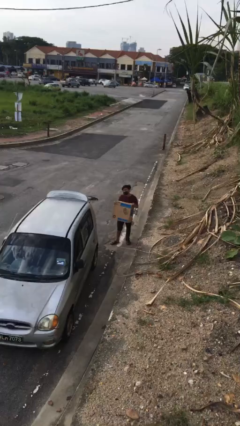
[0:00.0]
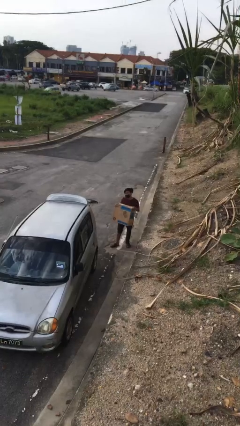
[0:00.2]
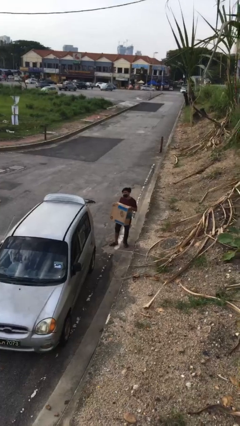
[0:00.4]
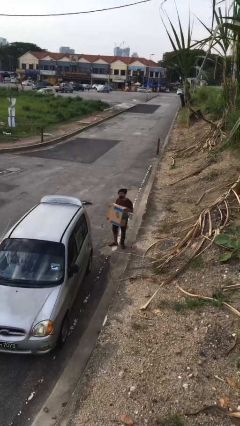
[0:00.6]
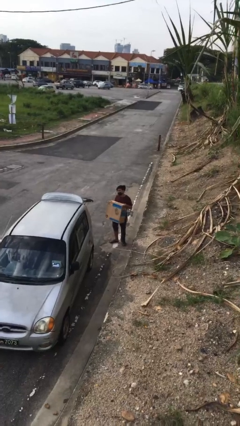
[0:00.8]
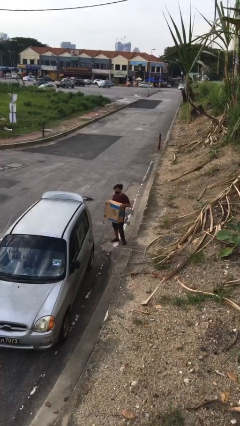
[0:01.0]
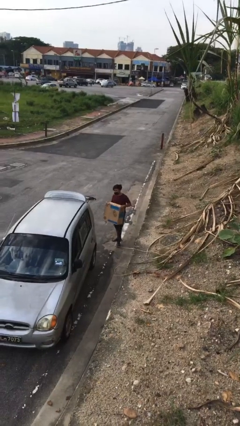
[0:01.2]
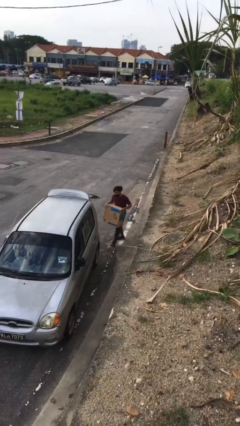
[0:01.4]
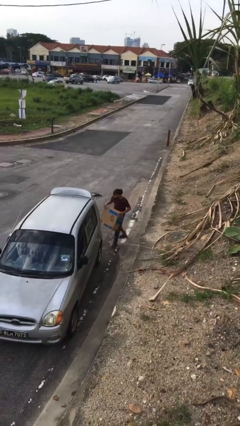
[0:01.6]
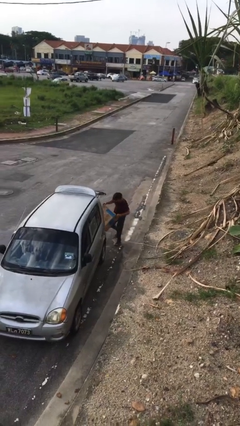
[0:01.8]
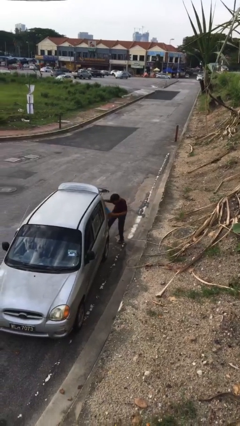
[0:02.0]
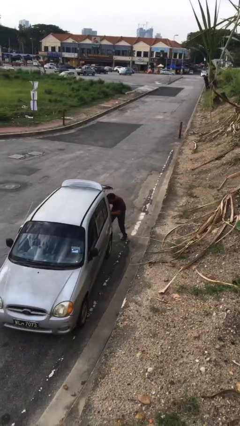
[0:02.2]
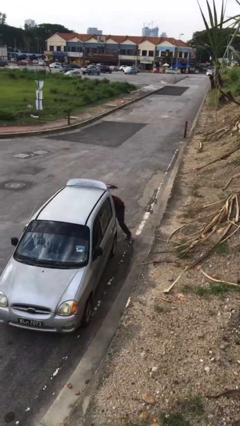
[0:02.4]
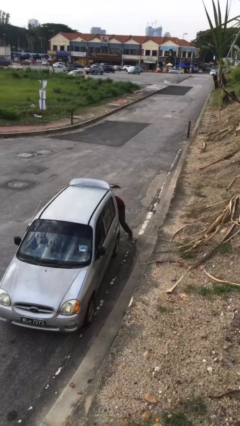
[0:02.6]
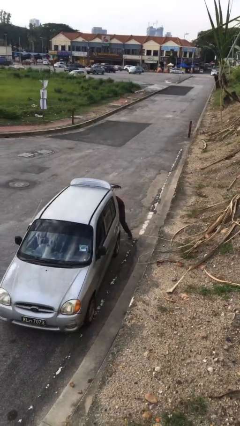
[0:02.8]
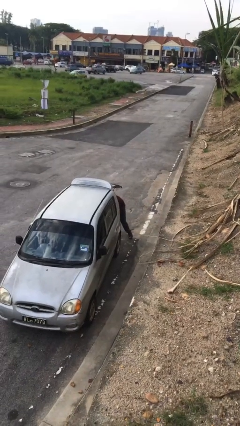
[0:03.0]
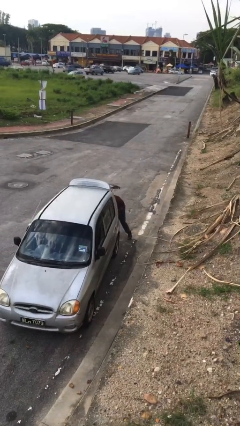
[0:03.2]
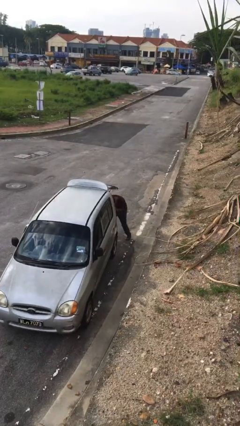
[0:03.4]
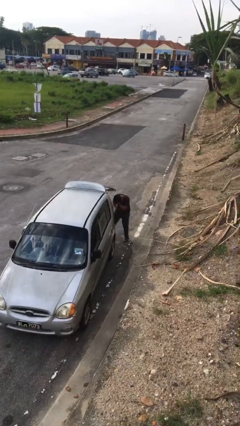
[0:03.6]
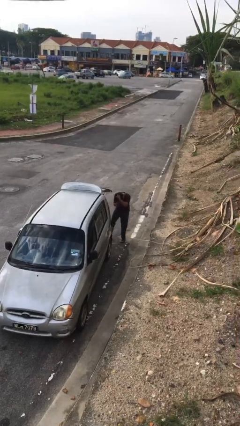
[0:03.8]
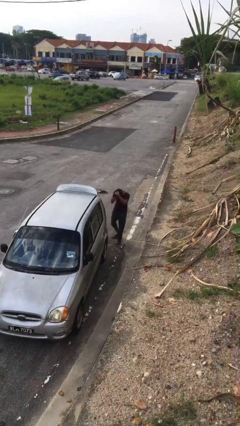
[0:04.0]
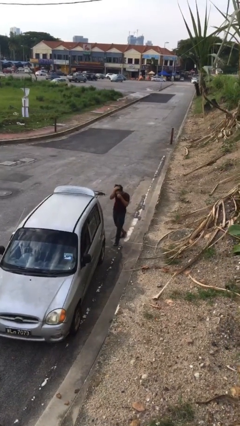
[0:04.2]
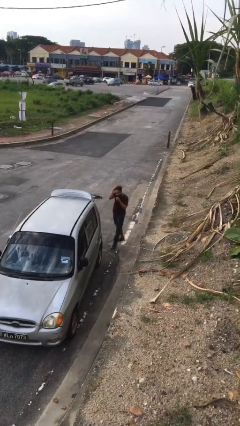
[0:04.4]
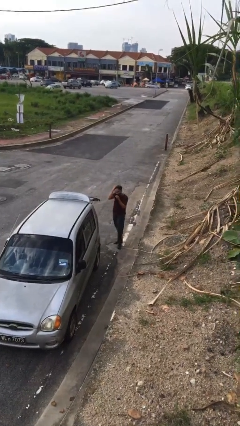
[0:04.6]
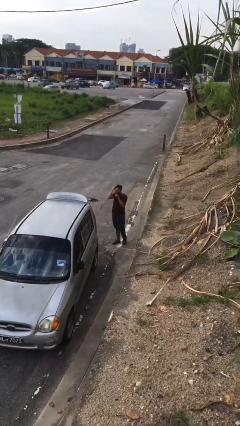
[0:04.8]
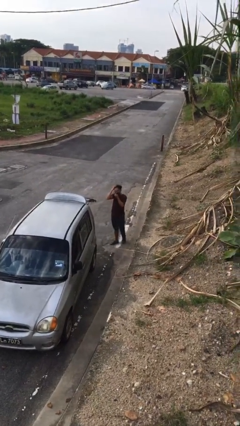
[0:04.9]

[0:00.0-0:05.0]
person loads car

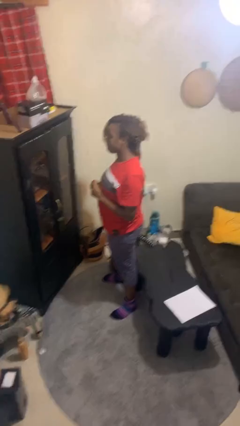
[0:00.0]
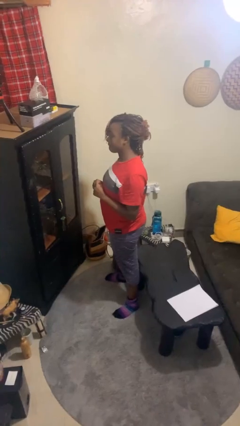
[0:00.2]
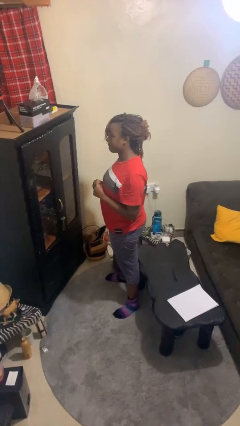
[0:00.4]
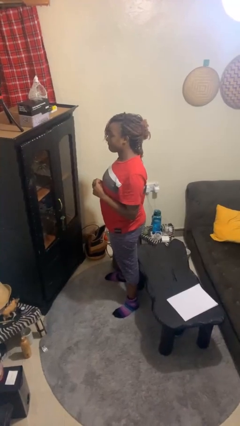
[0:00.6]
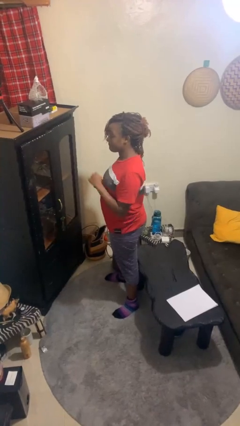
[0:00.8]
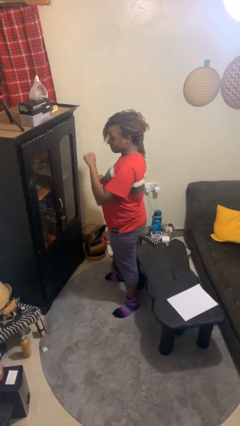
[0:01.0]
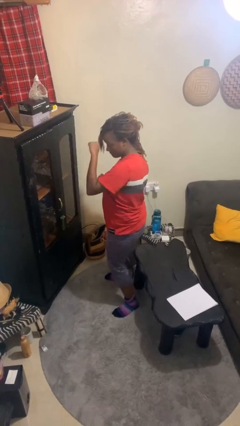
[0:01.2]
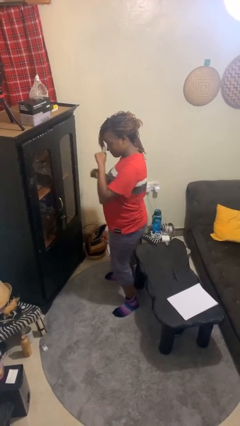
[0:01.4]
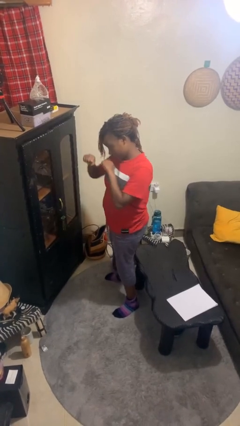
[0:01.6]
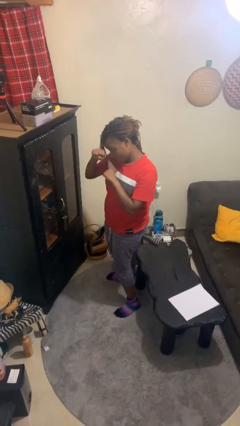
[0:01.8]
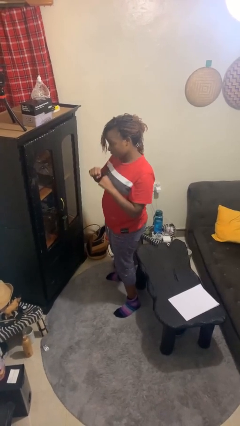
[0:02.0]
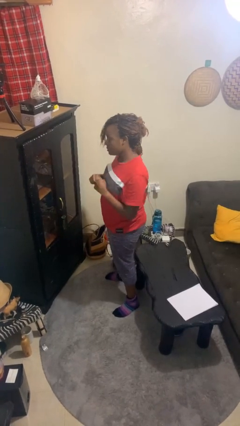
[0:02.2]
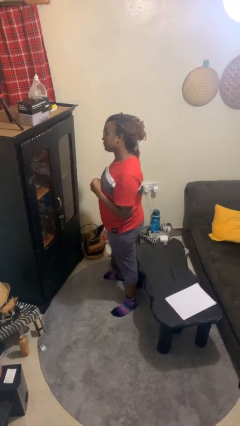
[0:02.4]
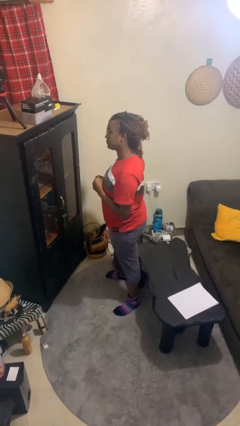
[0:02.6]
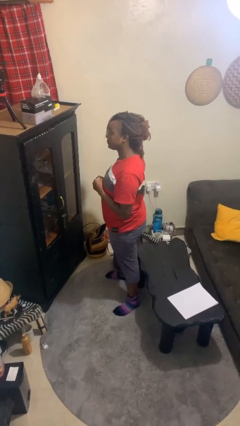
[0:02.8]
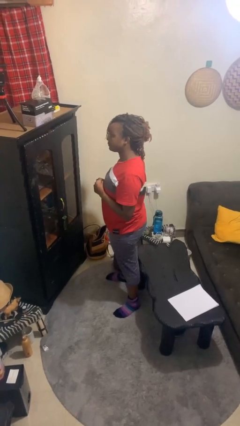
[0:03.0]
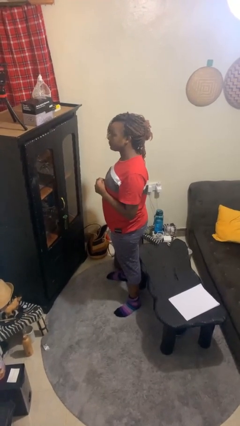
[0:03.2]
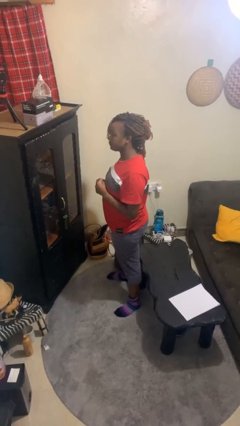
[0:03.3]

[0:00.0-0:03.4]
person punches

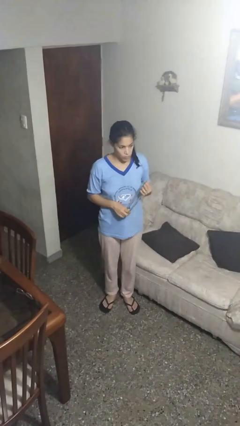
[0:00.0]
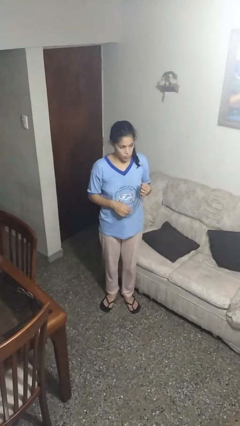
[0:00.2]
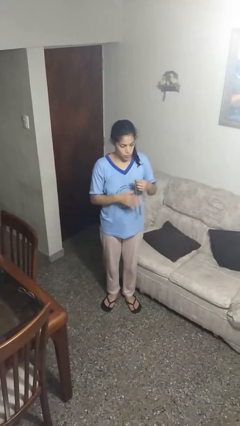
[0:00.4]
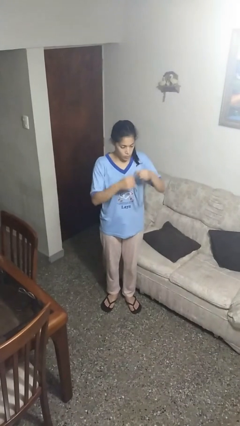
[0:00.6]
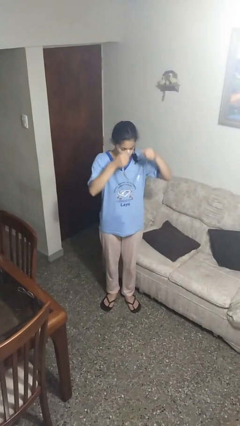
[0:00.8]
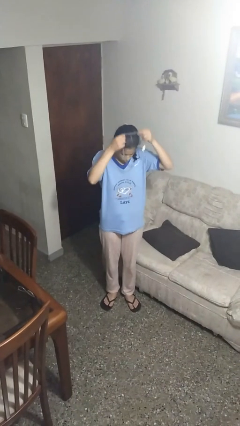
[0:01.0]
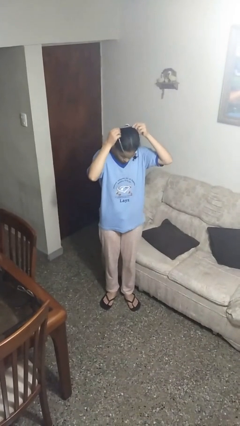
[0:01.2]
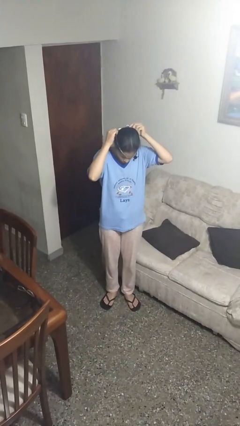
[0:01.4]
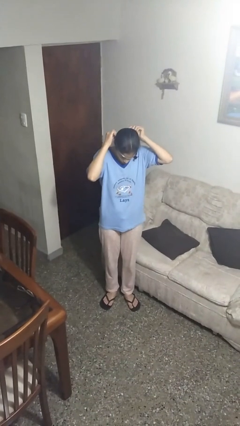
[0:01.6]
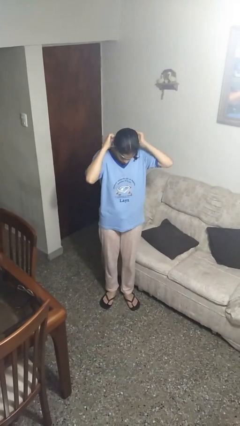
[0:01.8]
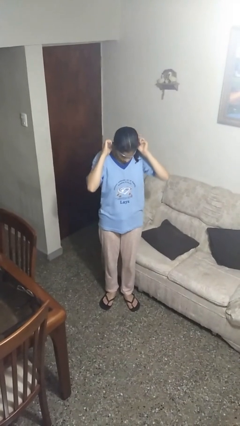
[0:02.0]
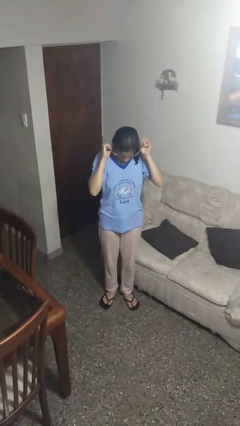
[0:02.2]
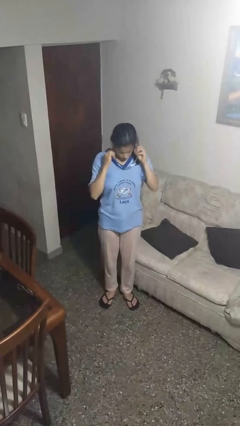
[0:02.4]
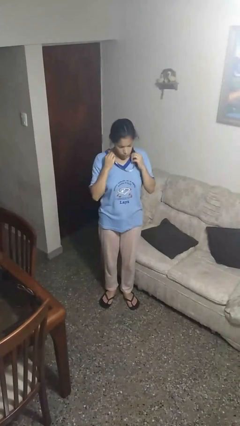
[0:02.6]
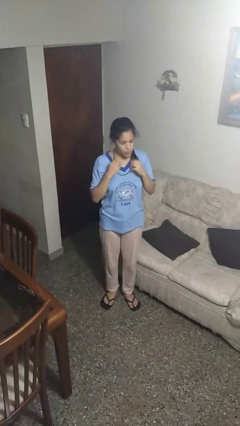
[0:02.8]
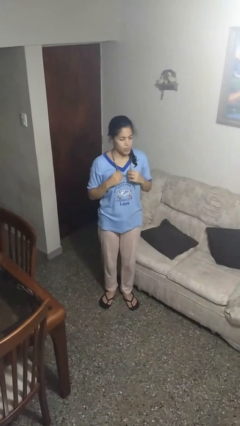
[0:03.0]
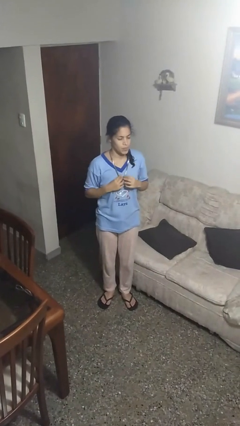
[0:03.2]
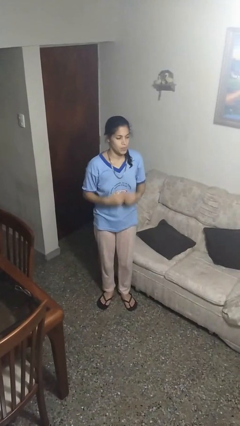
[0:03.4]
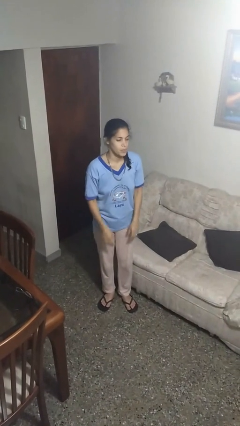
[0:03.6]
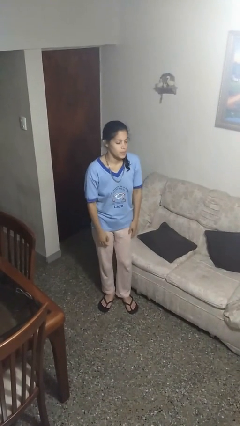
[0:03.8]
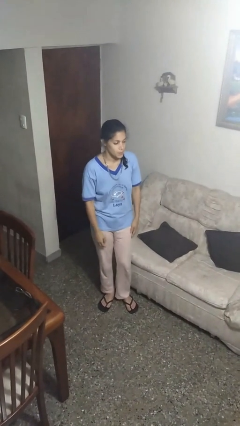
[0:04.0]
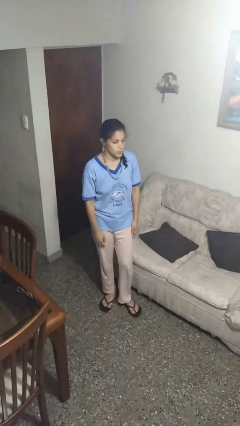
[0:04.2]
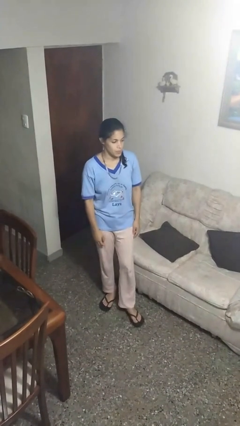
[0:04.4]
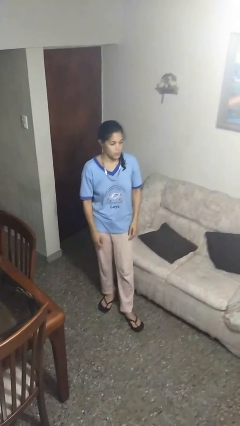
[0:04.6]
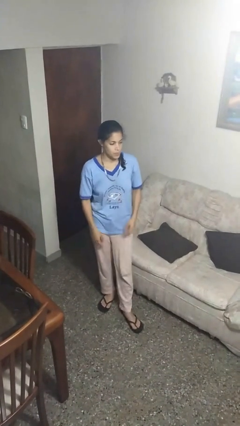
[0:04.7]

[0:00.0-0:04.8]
person puts on necklace

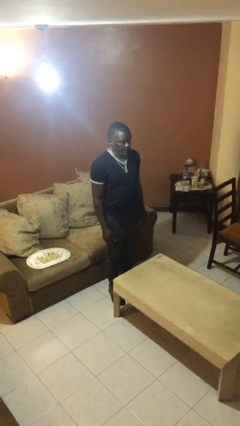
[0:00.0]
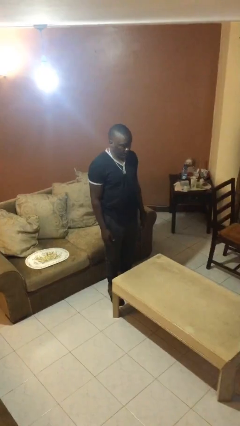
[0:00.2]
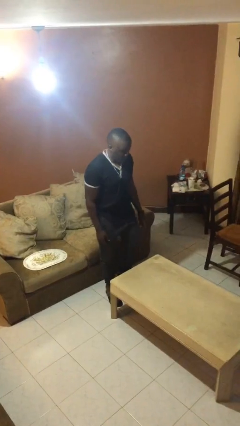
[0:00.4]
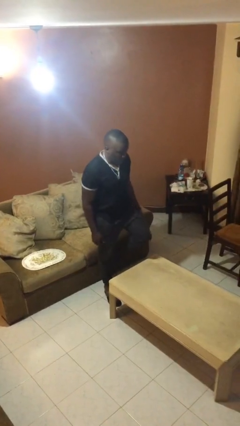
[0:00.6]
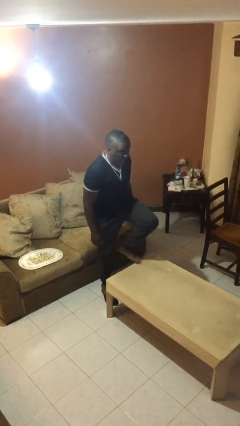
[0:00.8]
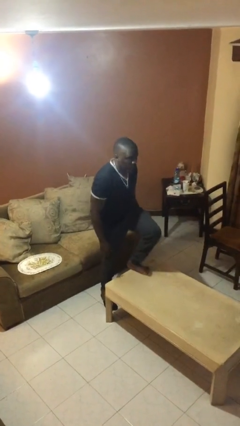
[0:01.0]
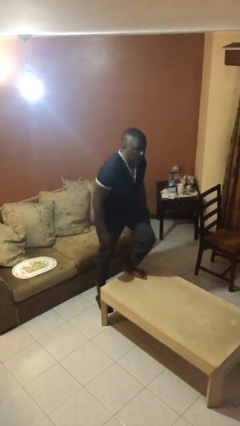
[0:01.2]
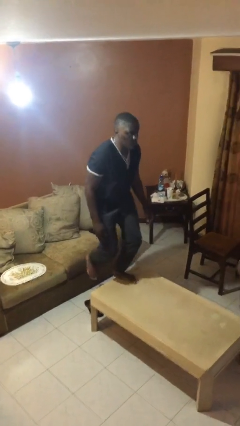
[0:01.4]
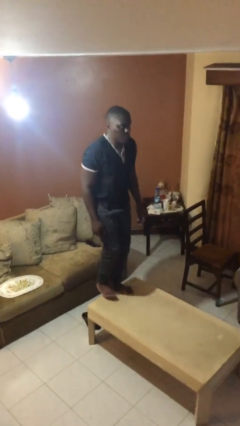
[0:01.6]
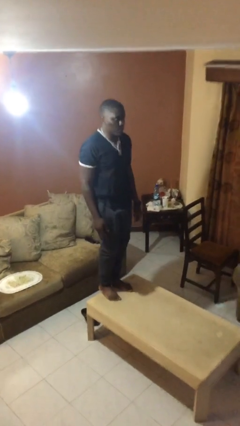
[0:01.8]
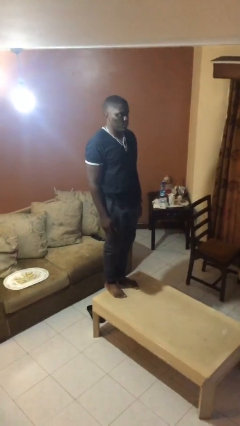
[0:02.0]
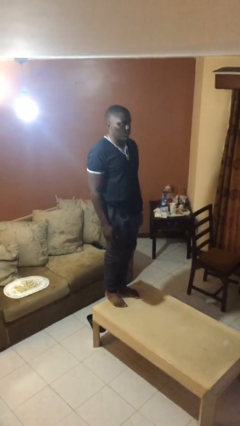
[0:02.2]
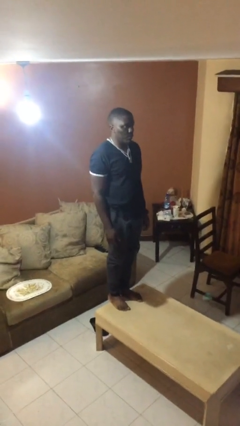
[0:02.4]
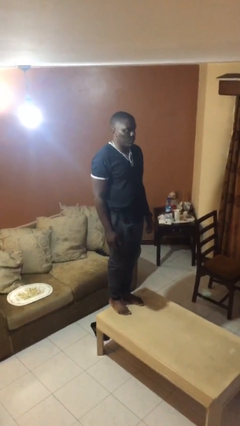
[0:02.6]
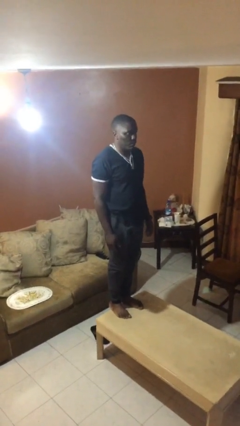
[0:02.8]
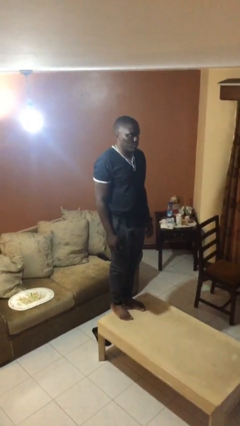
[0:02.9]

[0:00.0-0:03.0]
person climbs on table

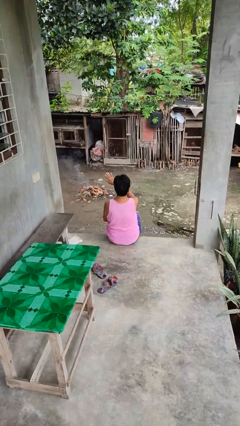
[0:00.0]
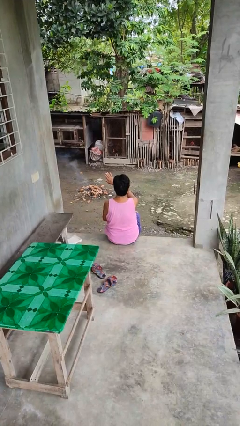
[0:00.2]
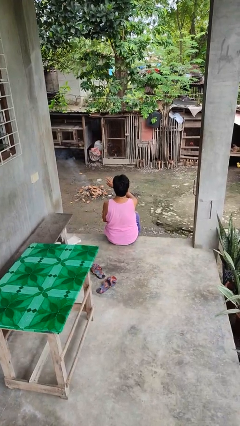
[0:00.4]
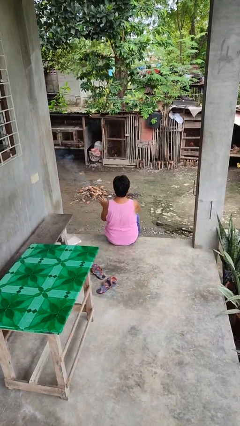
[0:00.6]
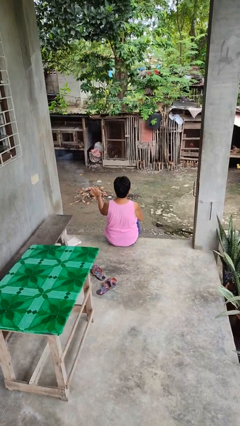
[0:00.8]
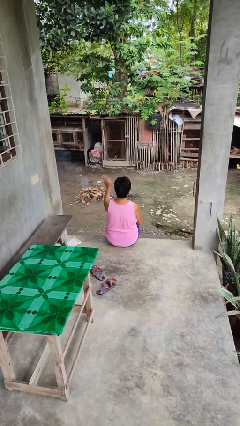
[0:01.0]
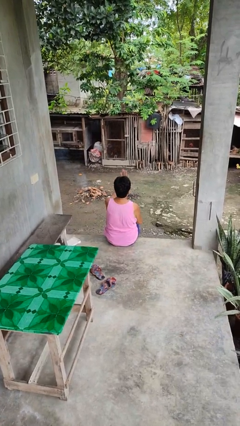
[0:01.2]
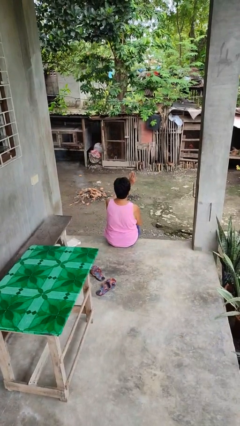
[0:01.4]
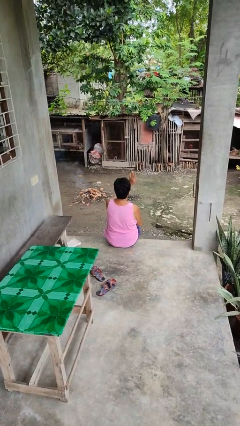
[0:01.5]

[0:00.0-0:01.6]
person gestures swipe right
